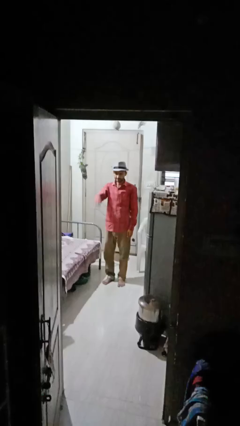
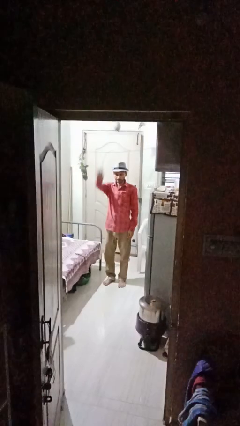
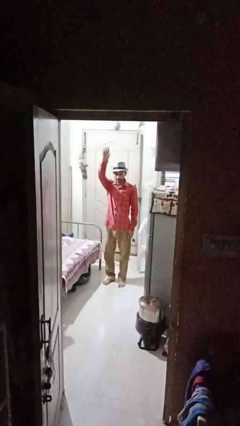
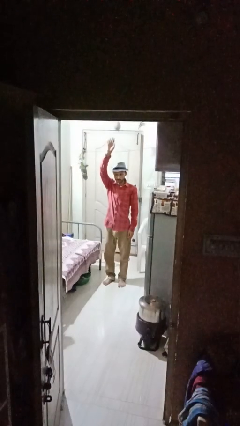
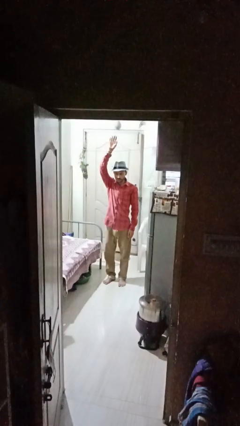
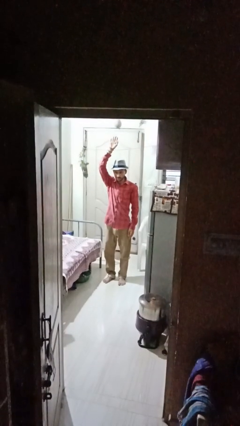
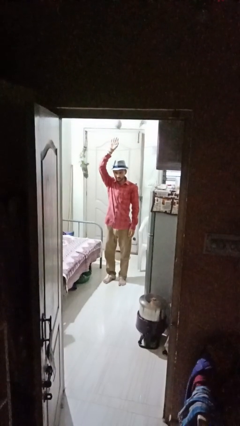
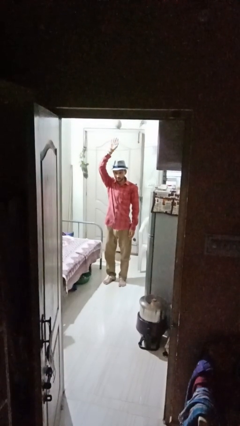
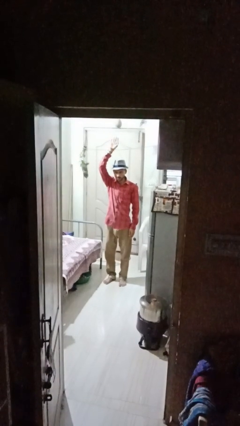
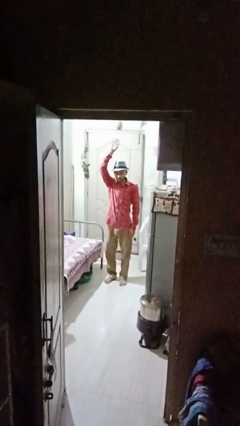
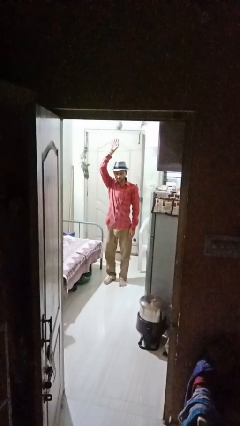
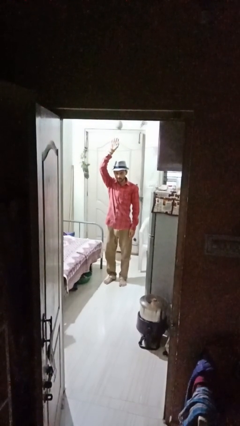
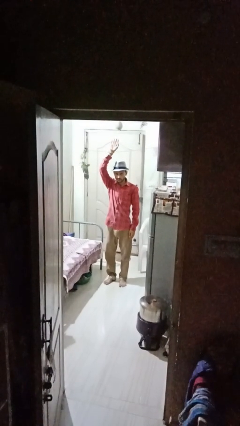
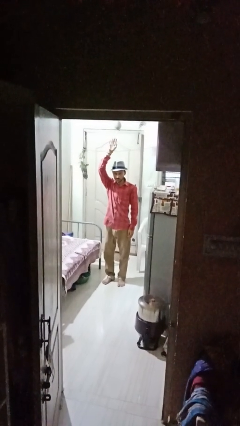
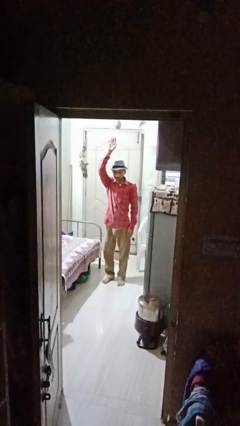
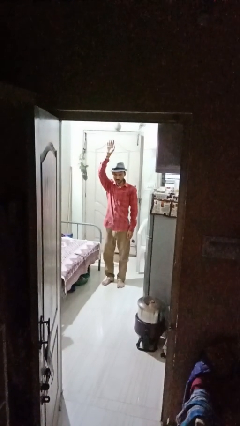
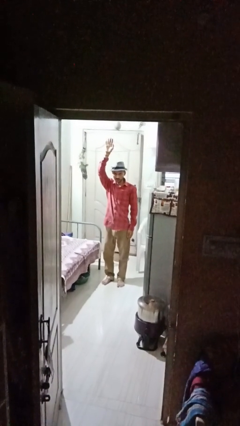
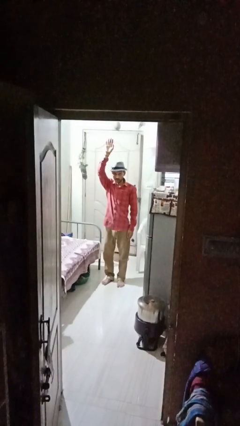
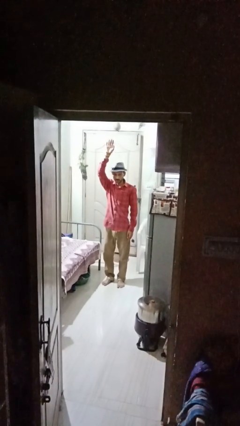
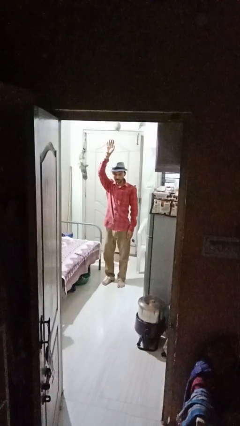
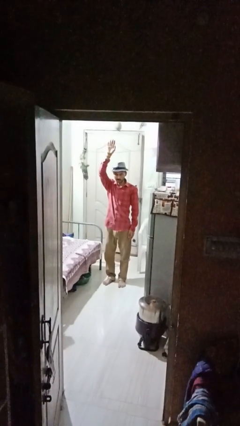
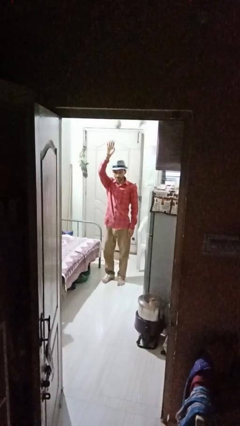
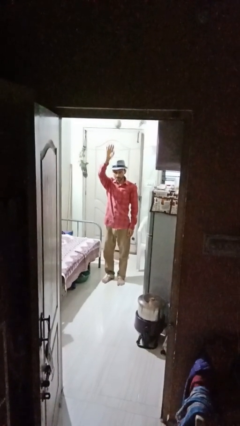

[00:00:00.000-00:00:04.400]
person gestures raise hand

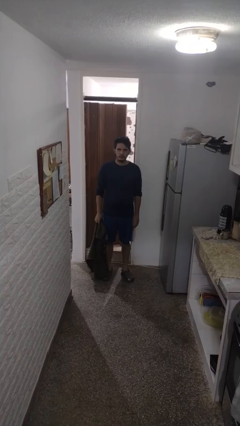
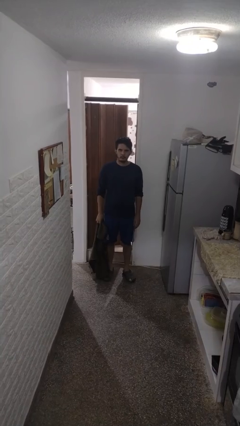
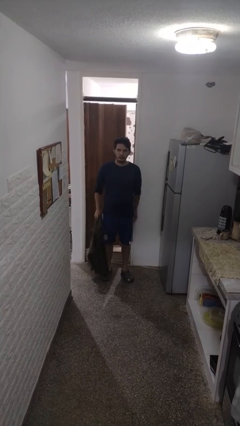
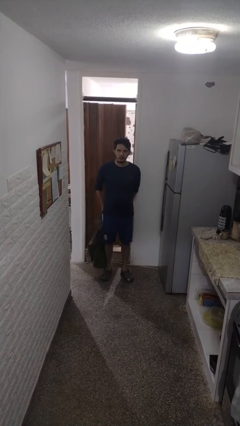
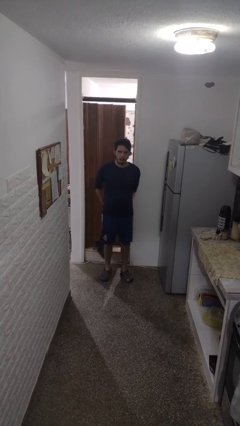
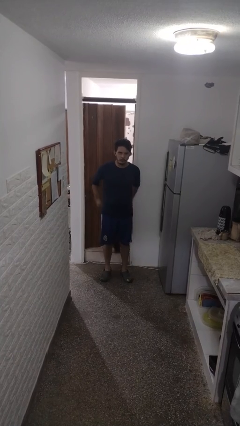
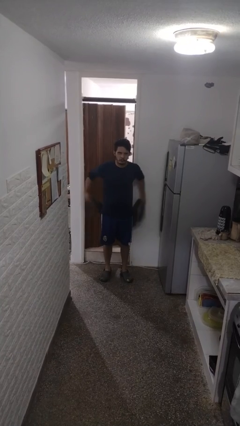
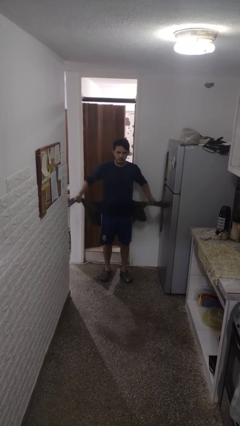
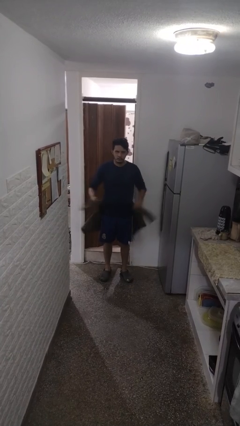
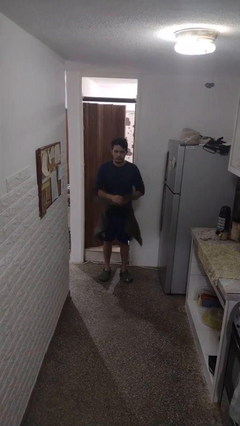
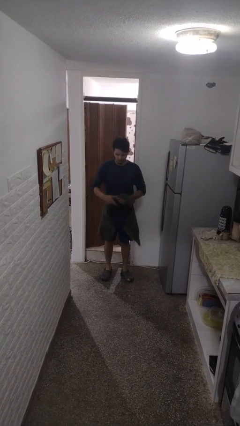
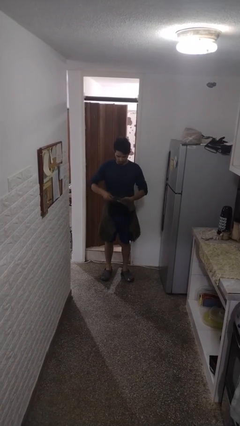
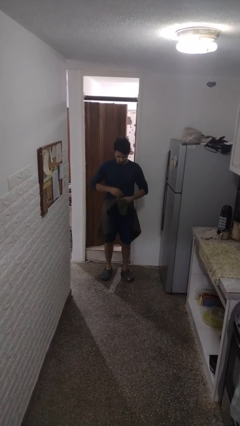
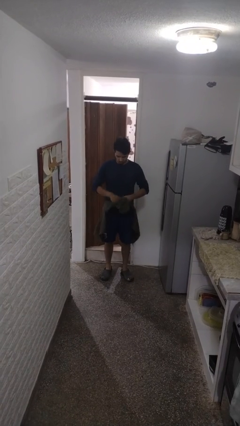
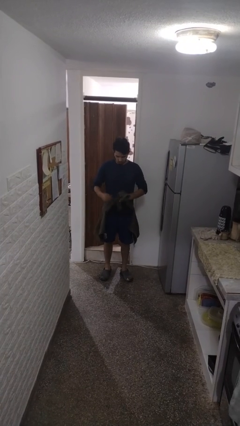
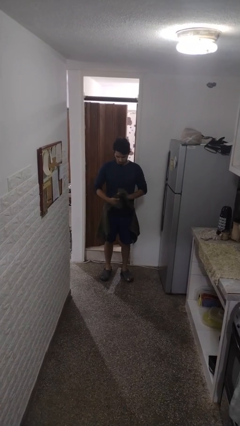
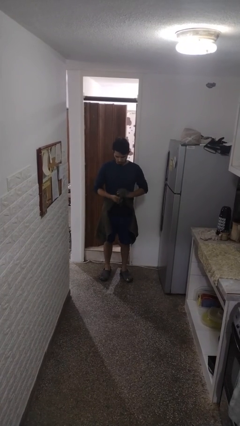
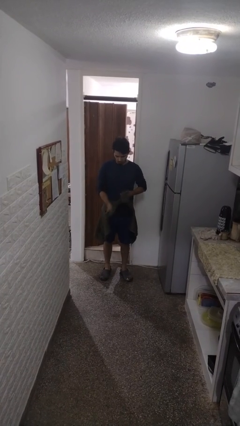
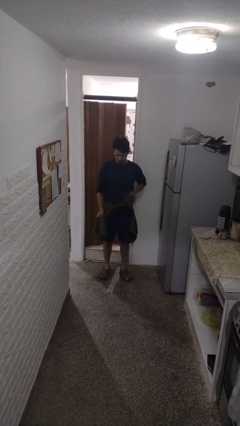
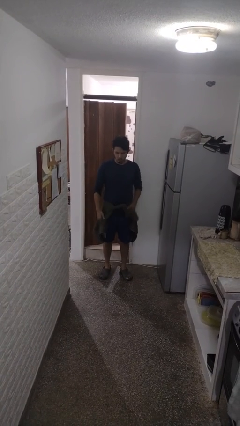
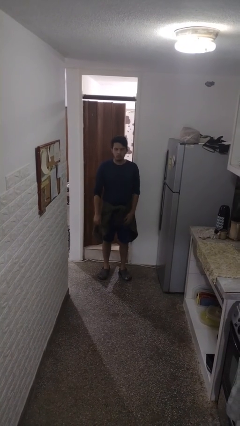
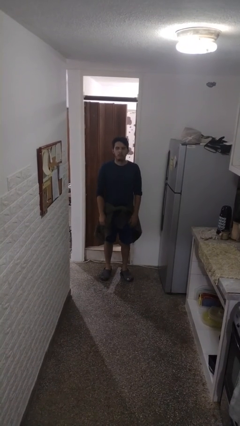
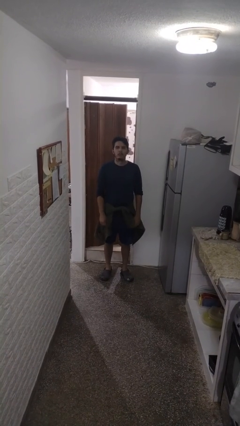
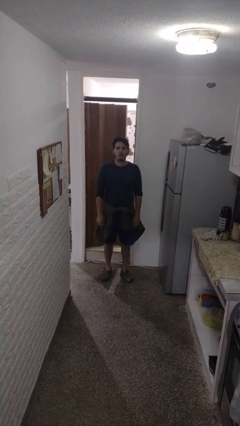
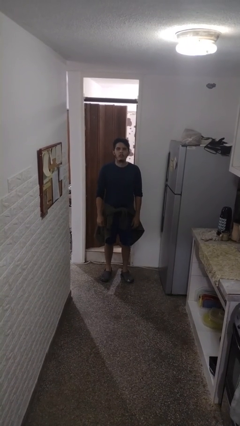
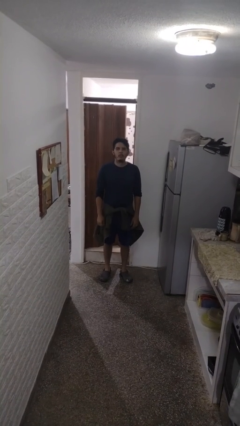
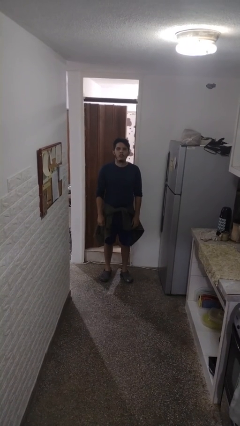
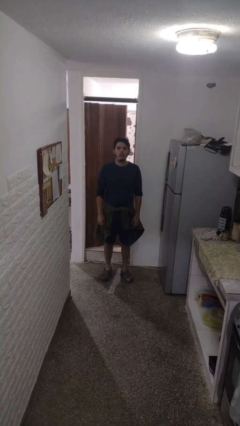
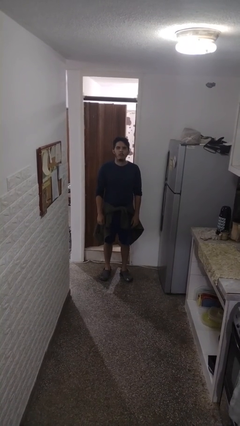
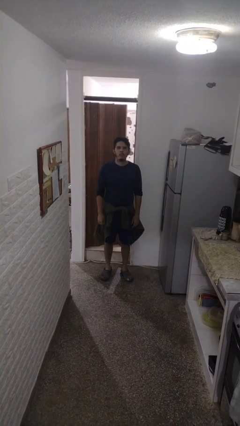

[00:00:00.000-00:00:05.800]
person ties jacket around waist

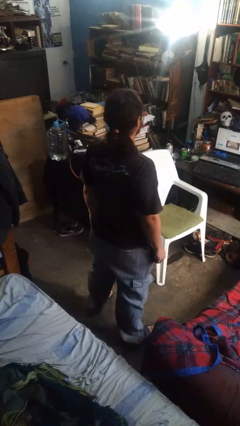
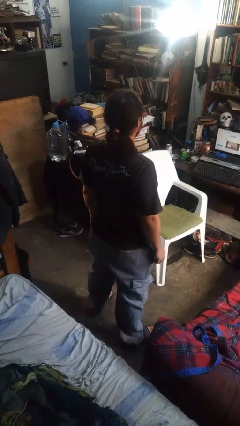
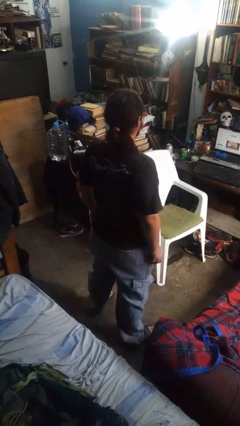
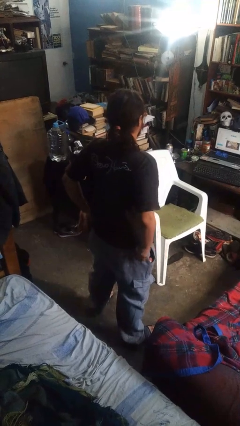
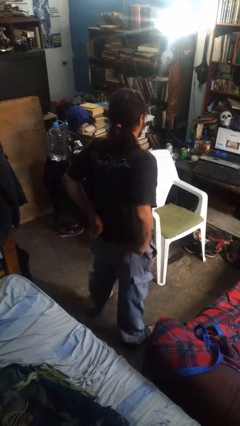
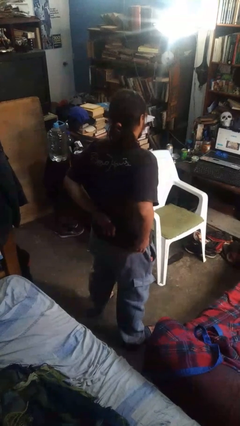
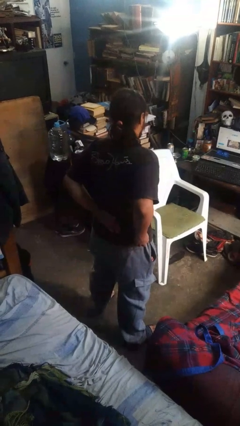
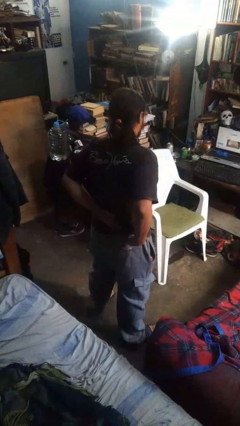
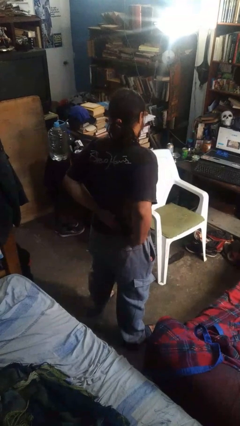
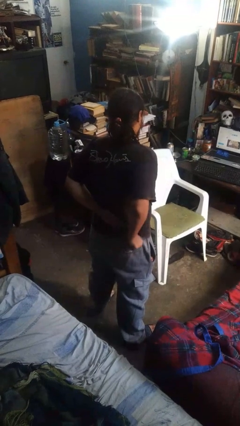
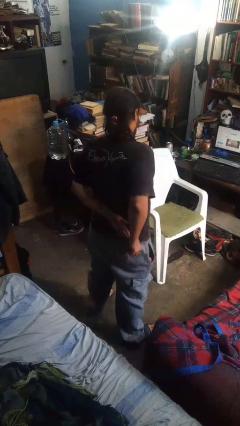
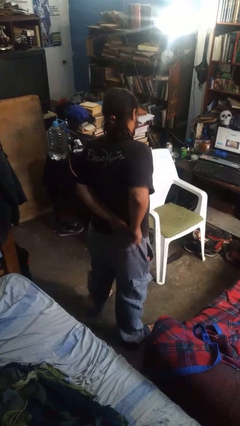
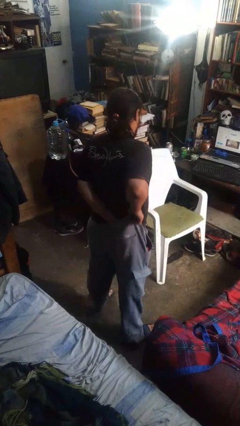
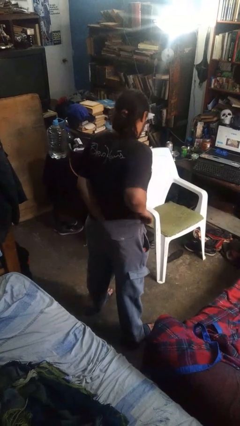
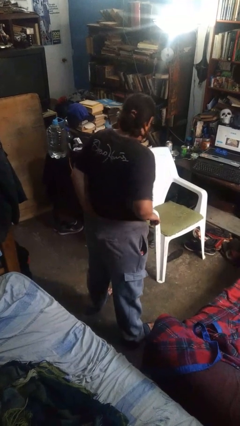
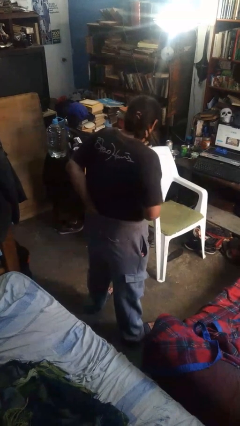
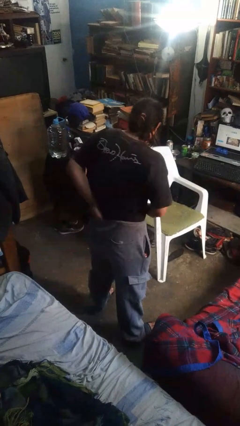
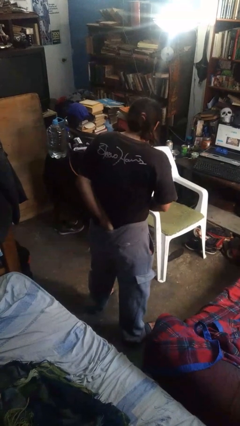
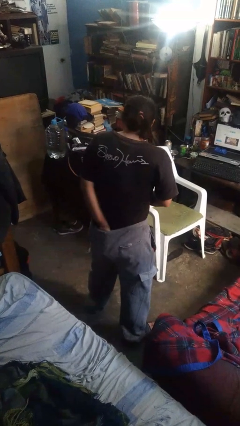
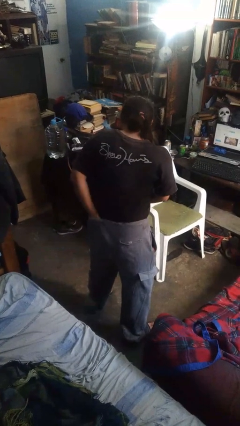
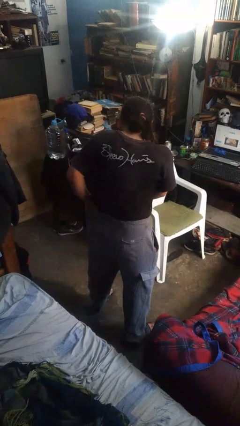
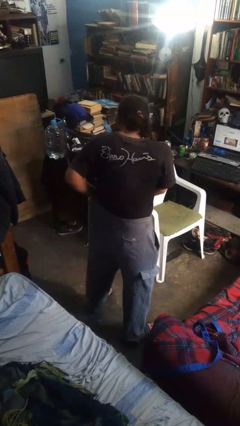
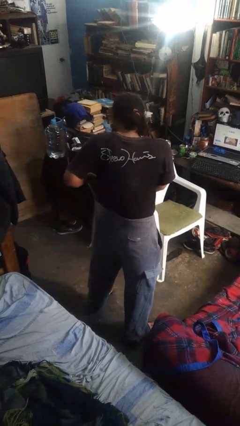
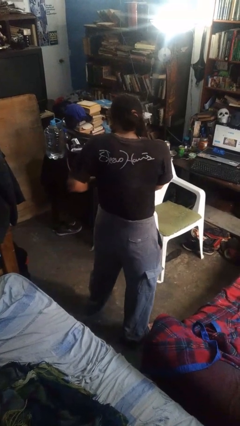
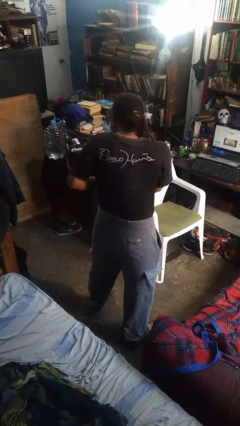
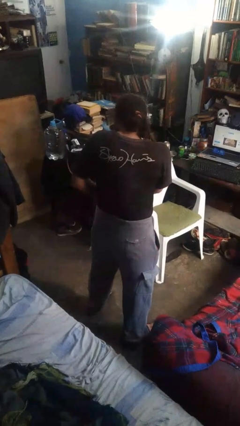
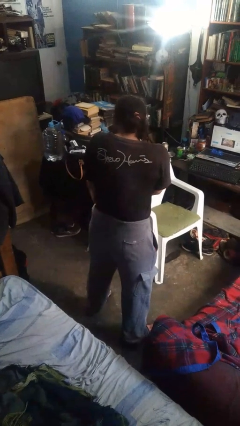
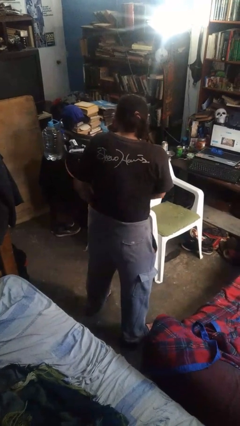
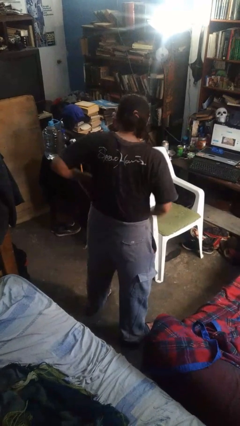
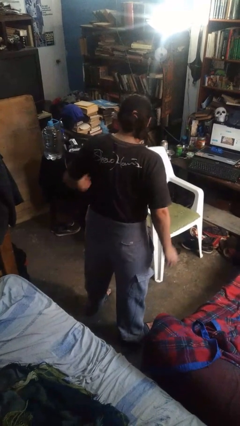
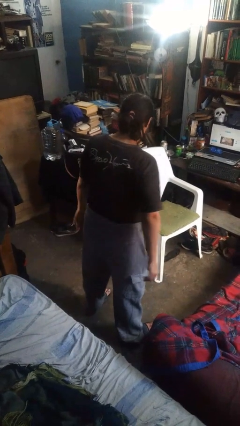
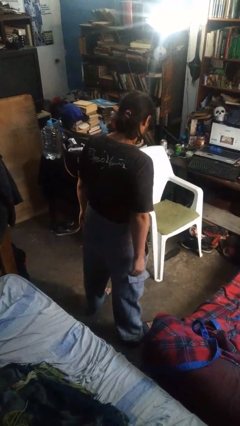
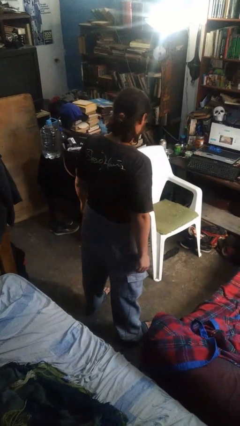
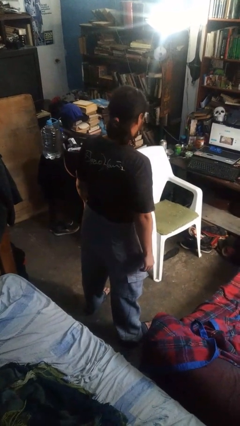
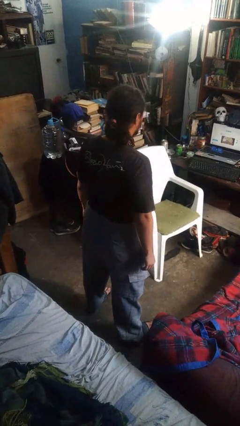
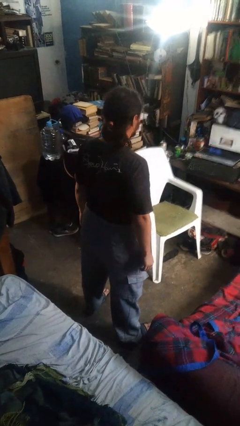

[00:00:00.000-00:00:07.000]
person tucks in shirt

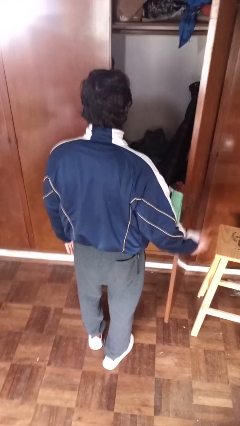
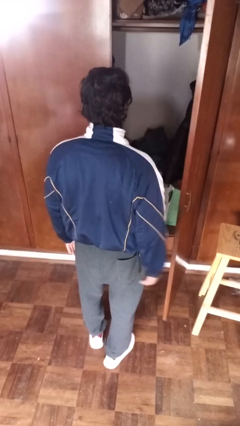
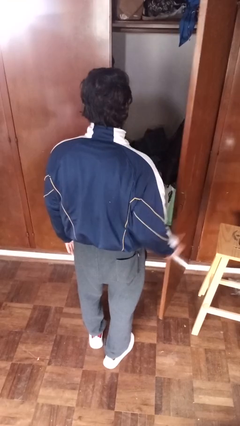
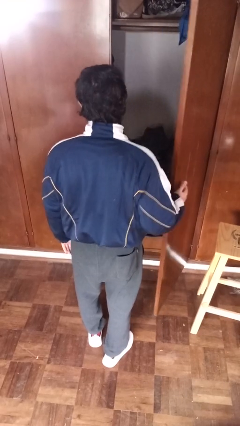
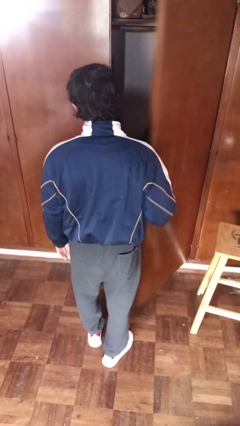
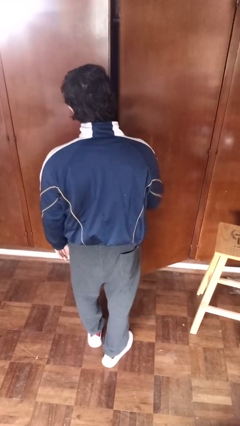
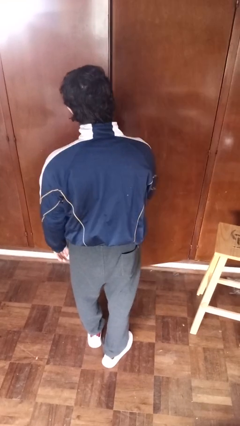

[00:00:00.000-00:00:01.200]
person closes closet door
